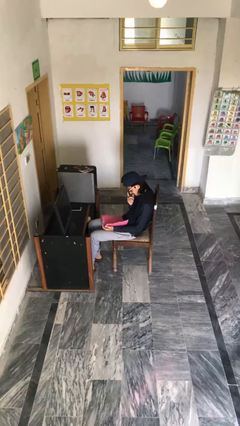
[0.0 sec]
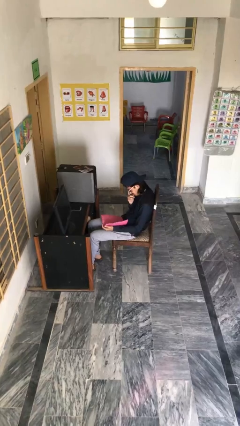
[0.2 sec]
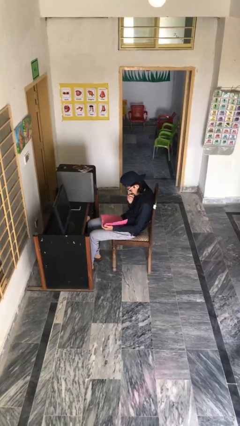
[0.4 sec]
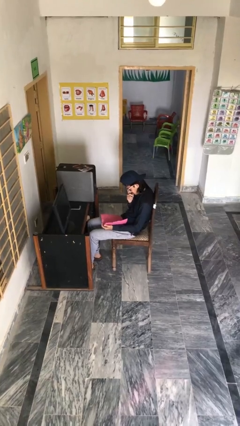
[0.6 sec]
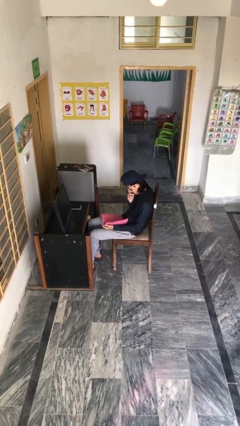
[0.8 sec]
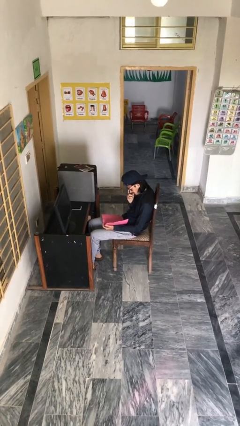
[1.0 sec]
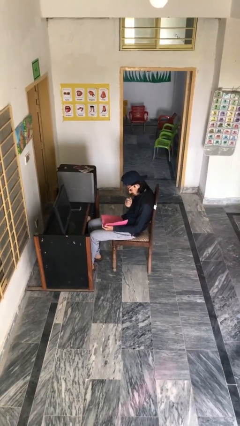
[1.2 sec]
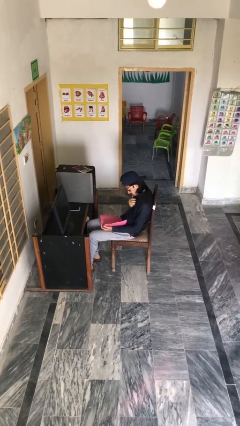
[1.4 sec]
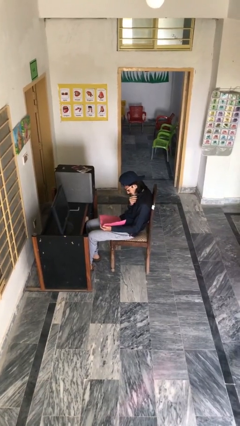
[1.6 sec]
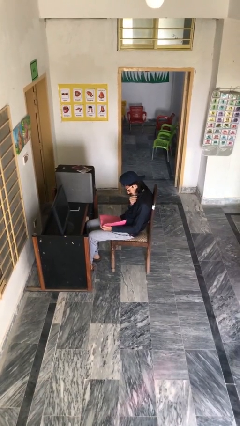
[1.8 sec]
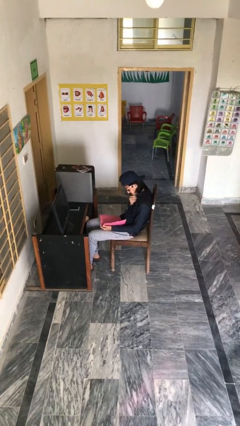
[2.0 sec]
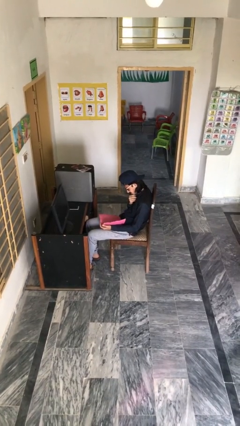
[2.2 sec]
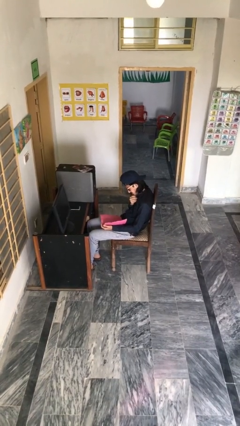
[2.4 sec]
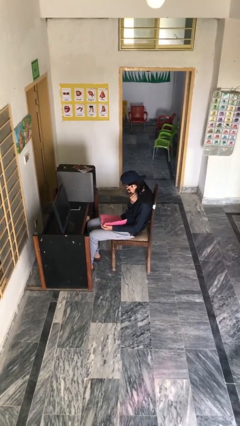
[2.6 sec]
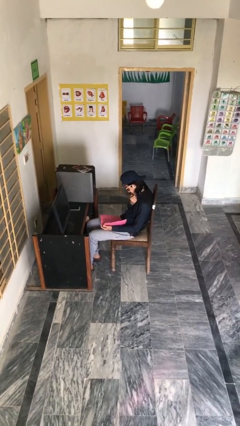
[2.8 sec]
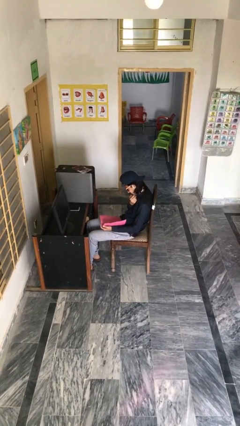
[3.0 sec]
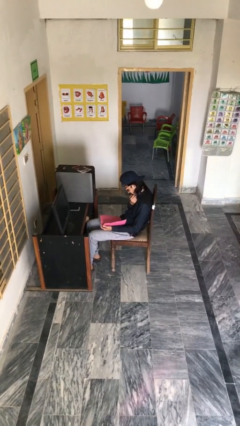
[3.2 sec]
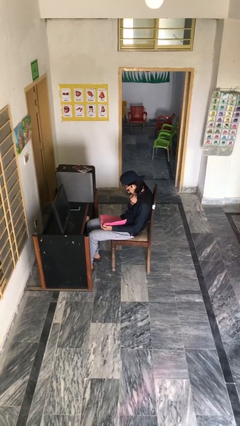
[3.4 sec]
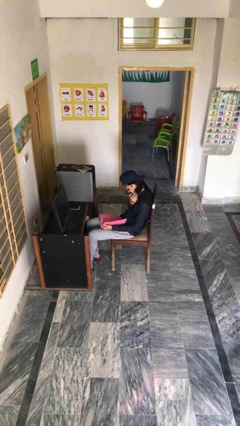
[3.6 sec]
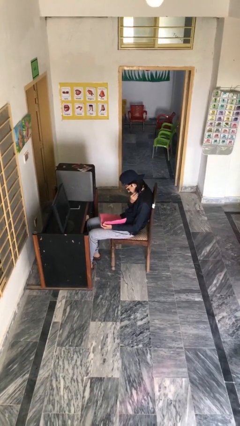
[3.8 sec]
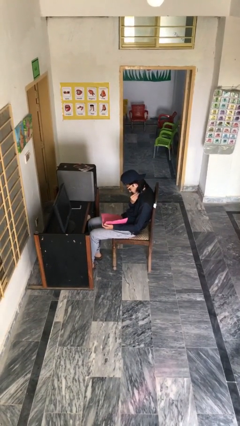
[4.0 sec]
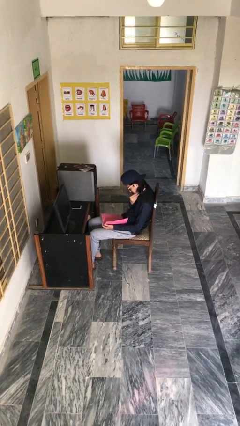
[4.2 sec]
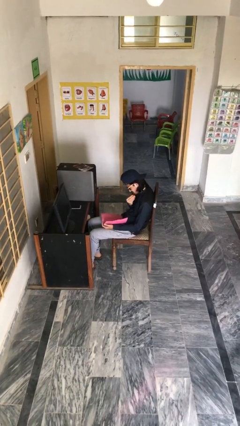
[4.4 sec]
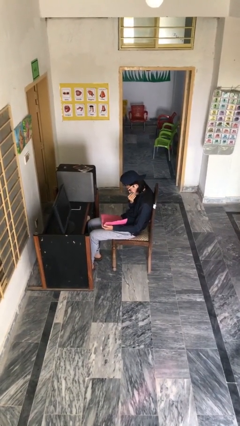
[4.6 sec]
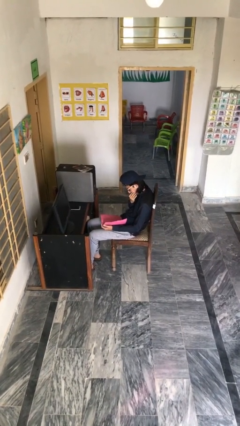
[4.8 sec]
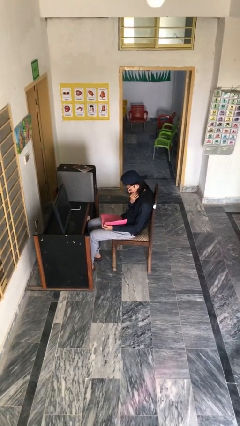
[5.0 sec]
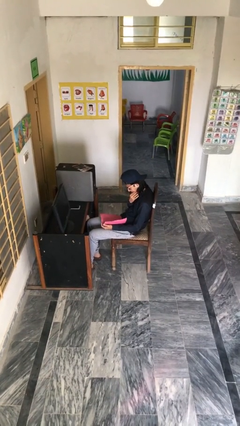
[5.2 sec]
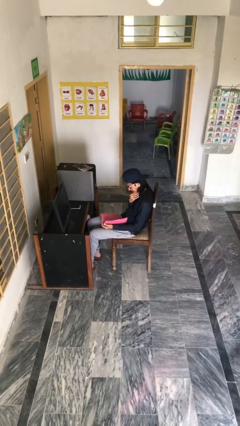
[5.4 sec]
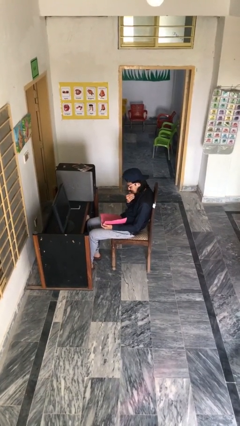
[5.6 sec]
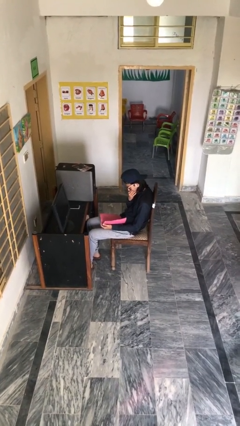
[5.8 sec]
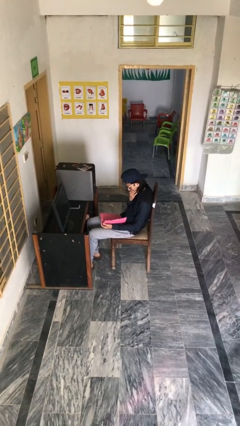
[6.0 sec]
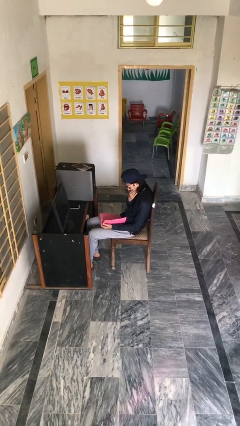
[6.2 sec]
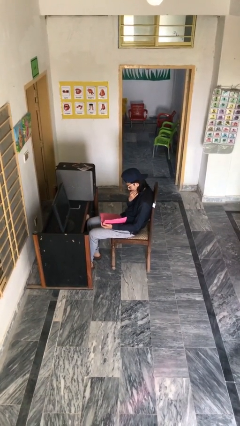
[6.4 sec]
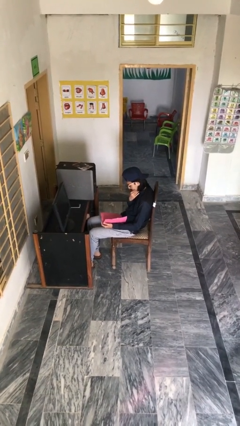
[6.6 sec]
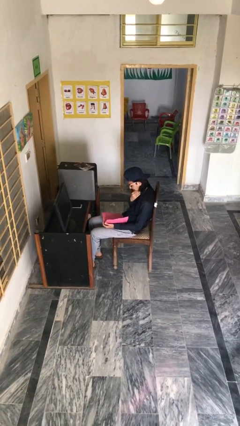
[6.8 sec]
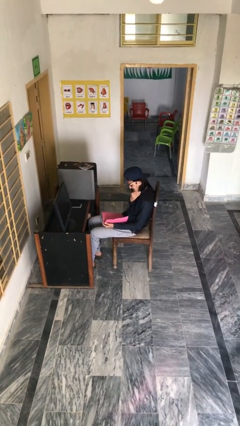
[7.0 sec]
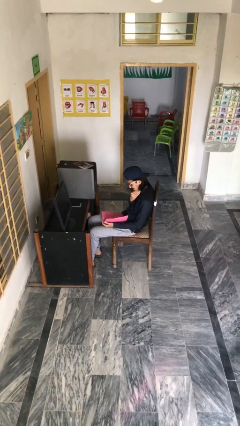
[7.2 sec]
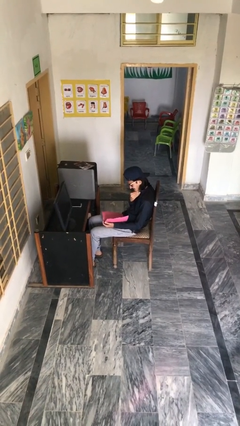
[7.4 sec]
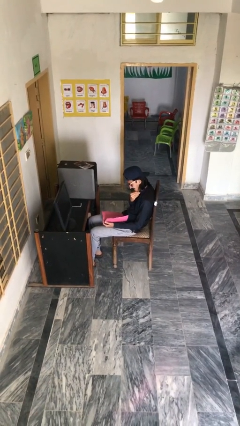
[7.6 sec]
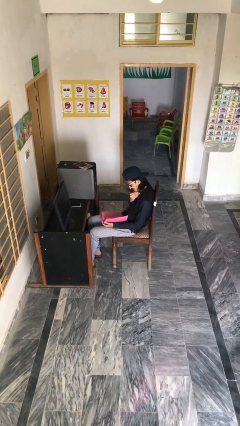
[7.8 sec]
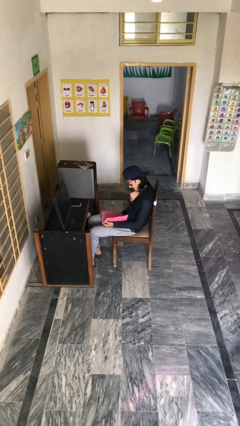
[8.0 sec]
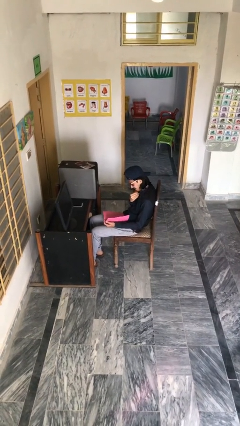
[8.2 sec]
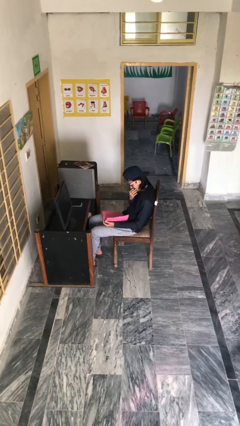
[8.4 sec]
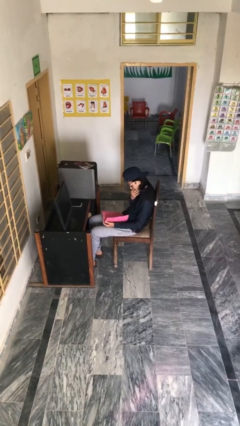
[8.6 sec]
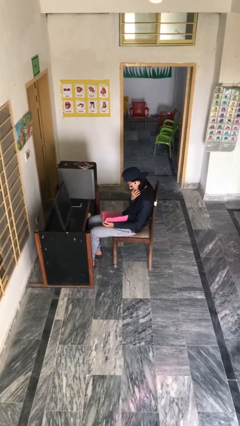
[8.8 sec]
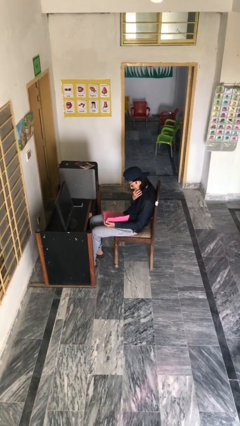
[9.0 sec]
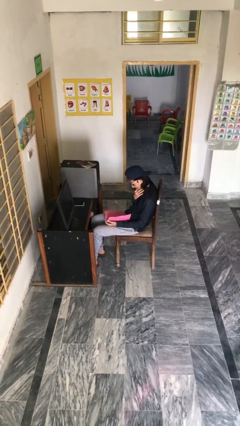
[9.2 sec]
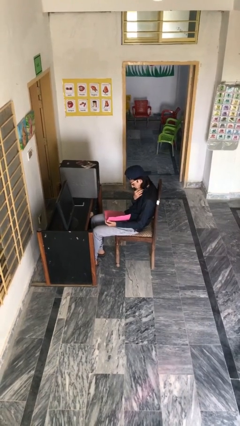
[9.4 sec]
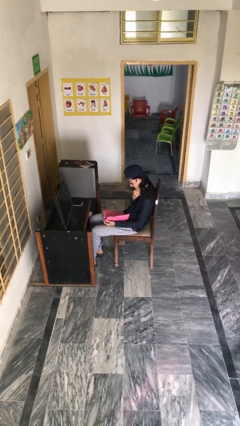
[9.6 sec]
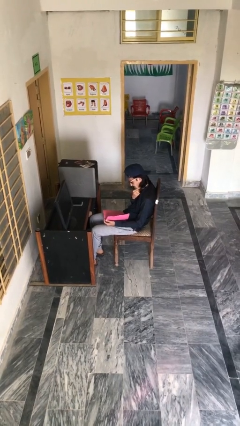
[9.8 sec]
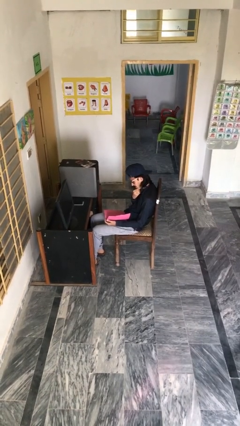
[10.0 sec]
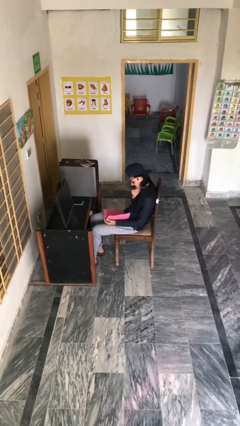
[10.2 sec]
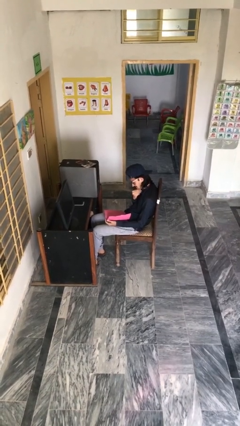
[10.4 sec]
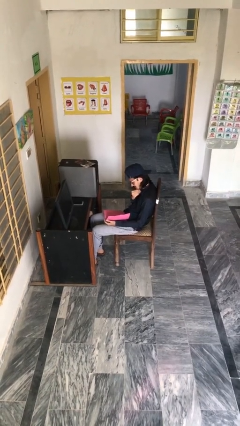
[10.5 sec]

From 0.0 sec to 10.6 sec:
person reads document

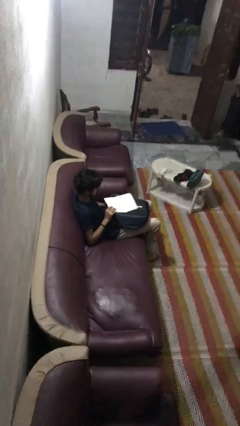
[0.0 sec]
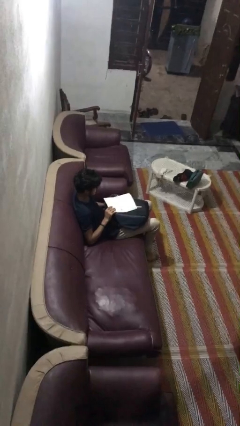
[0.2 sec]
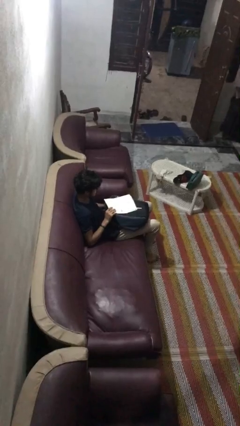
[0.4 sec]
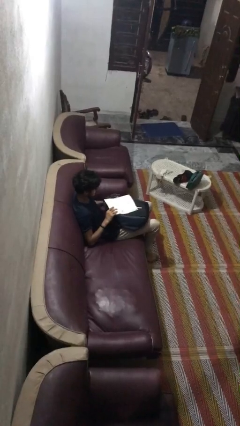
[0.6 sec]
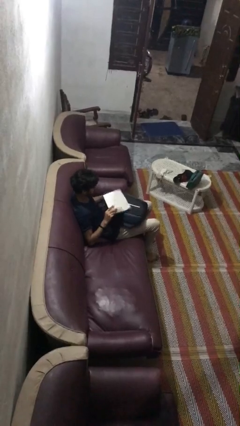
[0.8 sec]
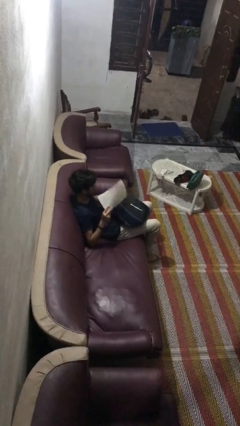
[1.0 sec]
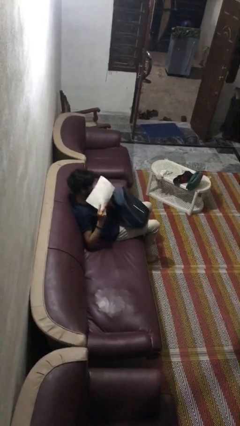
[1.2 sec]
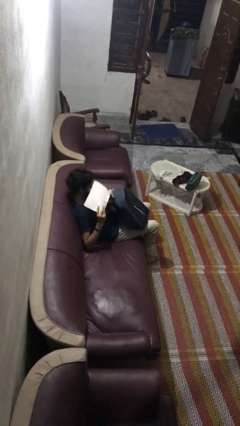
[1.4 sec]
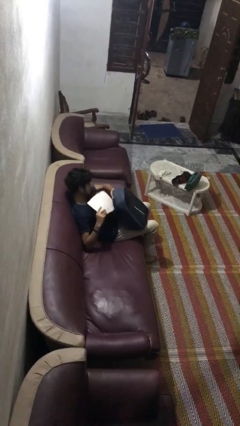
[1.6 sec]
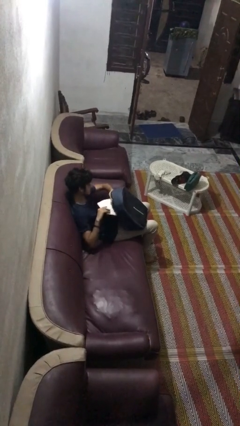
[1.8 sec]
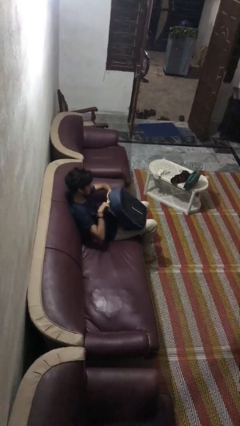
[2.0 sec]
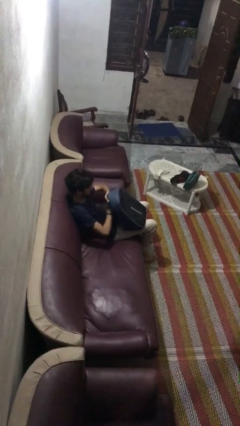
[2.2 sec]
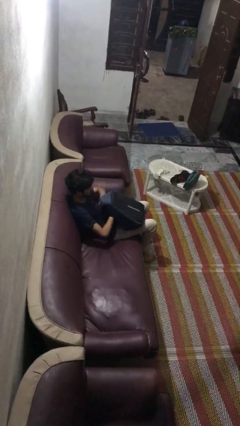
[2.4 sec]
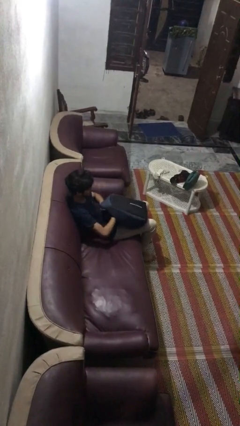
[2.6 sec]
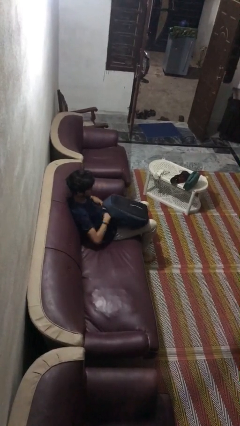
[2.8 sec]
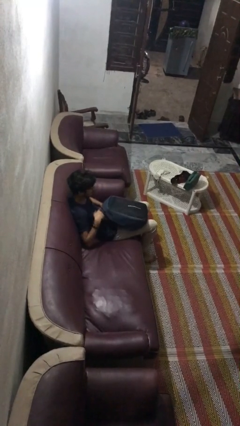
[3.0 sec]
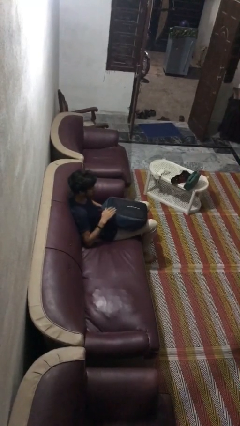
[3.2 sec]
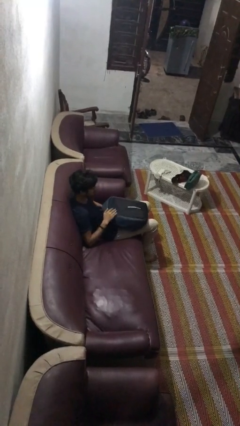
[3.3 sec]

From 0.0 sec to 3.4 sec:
person puts object into backpack

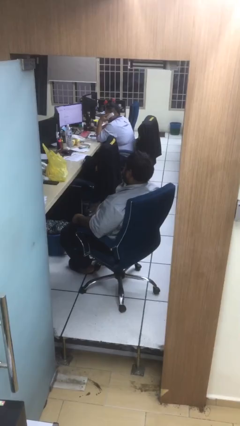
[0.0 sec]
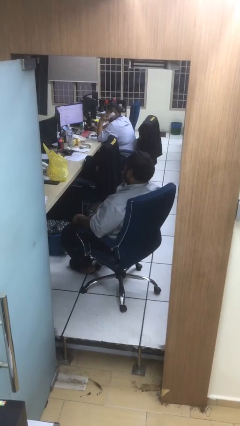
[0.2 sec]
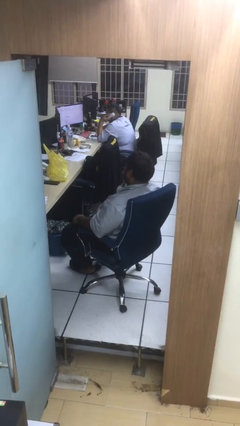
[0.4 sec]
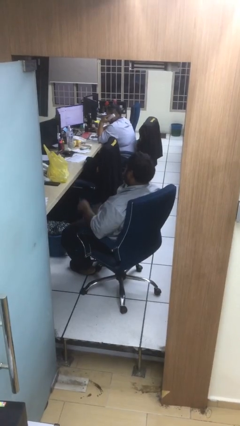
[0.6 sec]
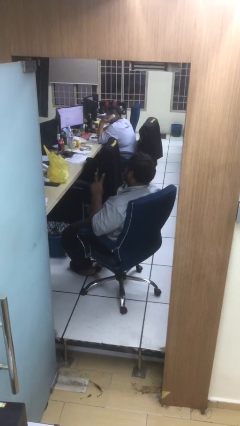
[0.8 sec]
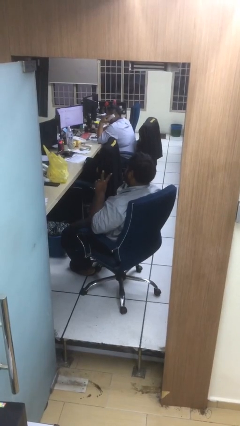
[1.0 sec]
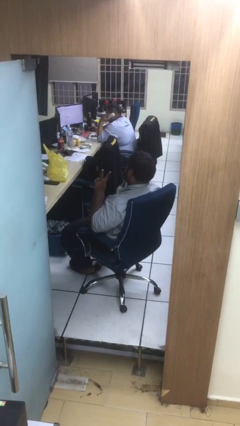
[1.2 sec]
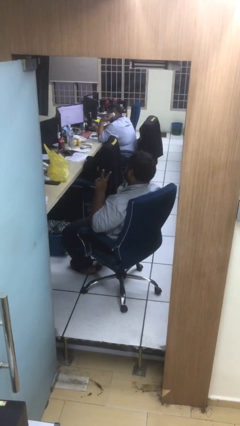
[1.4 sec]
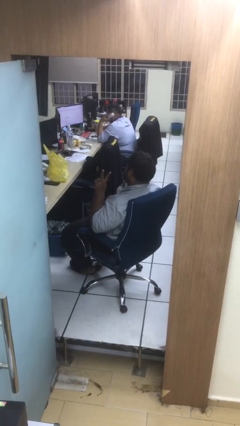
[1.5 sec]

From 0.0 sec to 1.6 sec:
person gestures peace

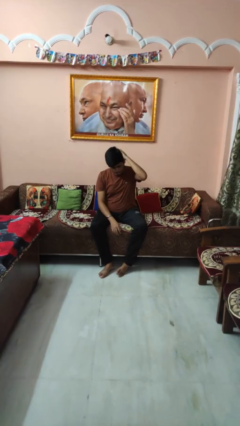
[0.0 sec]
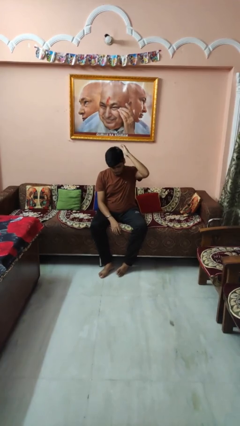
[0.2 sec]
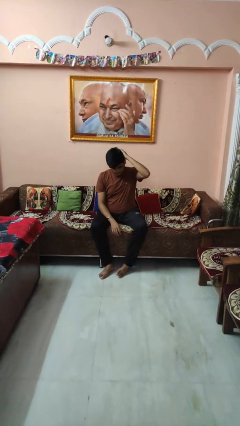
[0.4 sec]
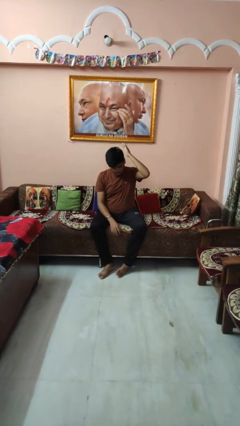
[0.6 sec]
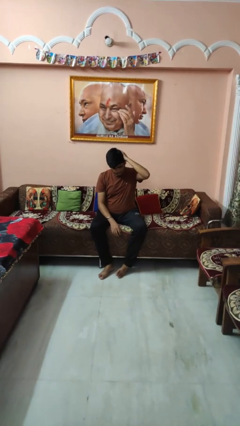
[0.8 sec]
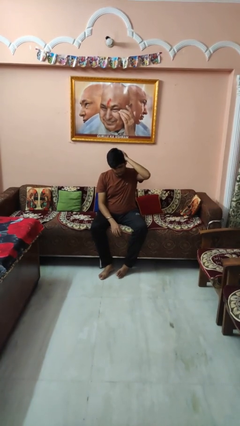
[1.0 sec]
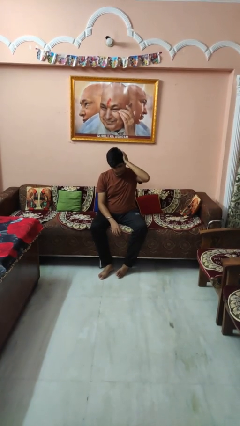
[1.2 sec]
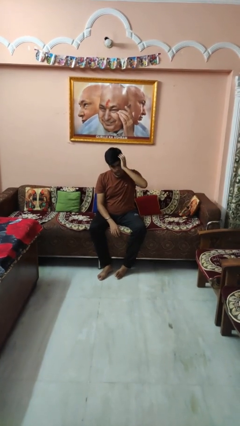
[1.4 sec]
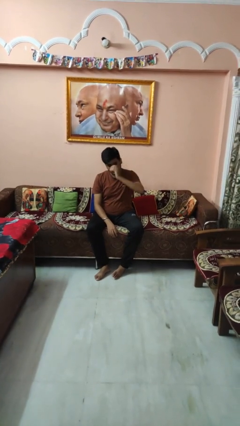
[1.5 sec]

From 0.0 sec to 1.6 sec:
person pats head
